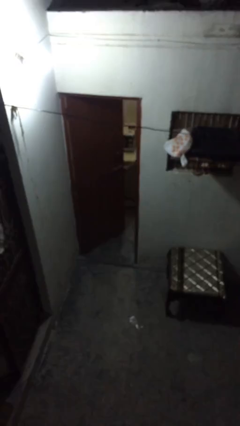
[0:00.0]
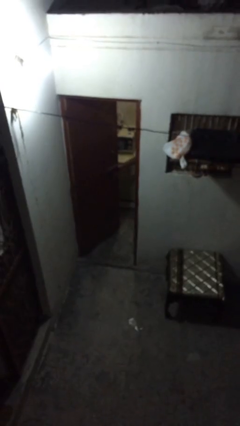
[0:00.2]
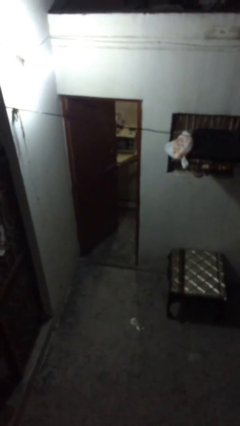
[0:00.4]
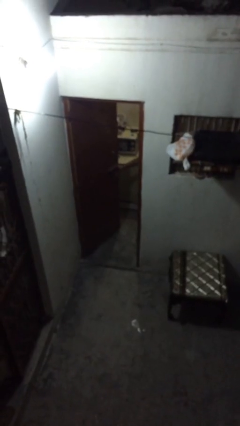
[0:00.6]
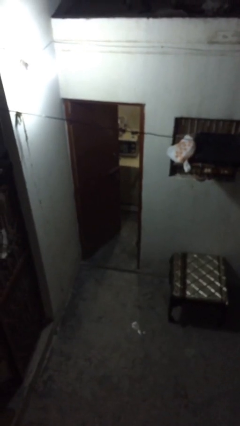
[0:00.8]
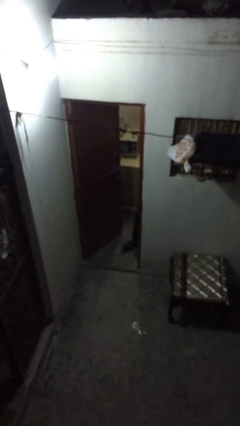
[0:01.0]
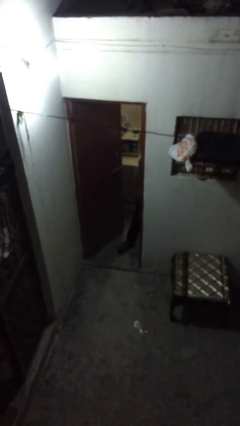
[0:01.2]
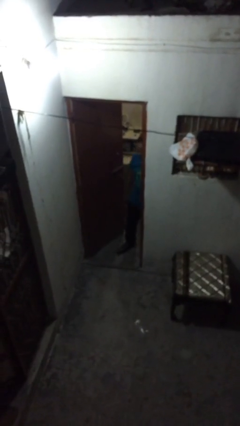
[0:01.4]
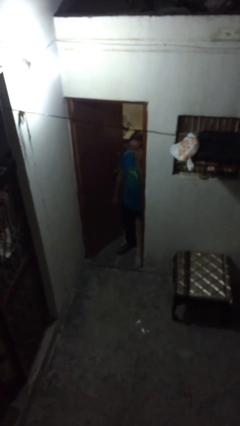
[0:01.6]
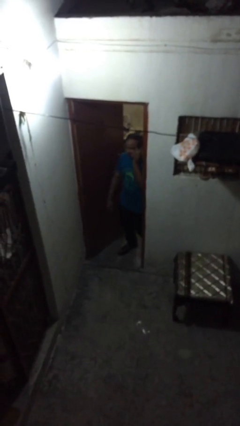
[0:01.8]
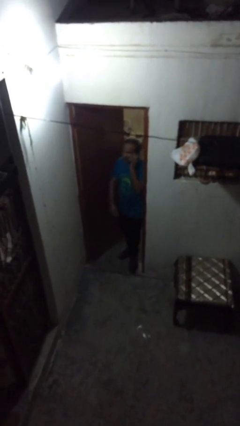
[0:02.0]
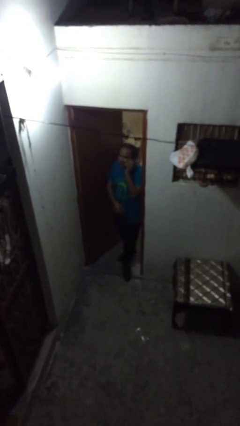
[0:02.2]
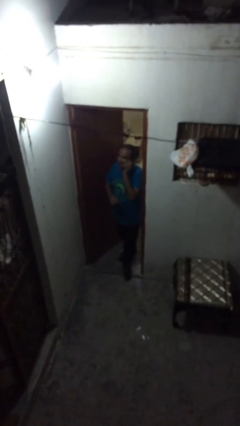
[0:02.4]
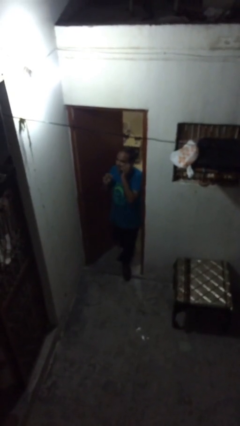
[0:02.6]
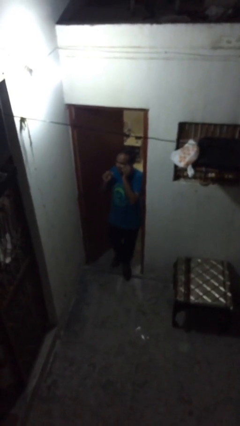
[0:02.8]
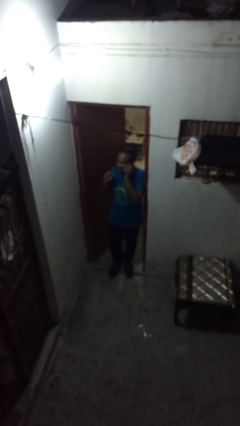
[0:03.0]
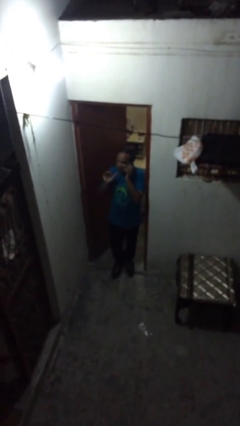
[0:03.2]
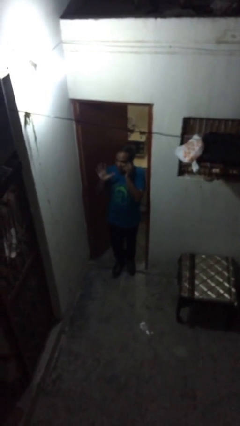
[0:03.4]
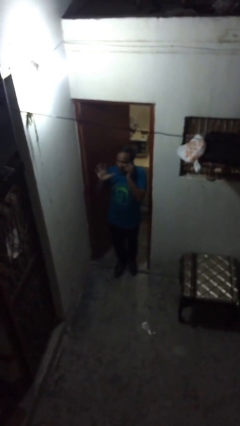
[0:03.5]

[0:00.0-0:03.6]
person enters scene through structure

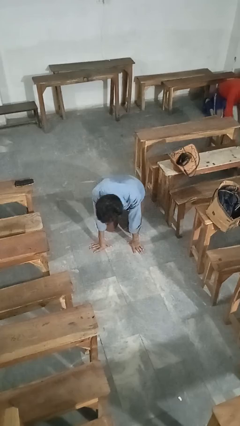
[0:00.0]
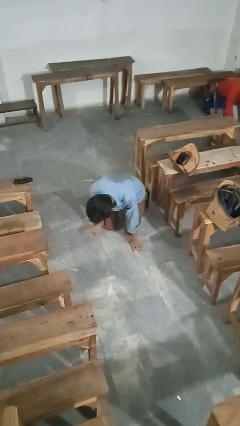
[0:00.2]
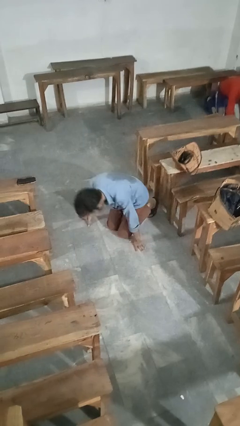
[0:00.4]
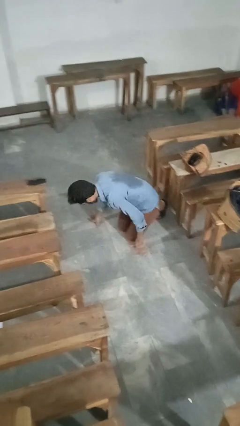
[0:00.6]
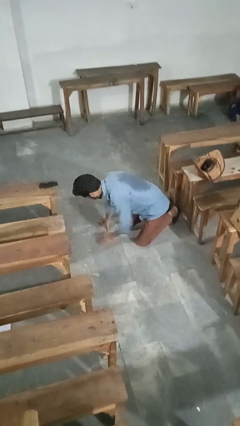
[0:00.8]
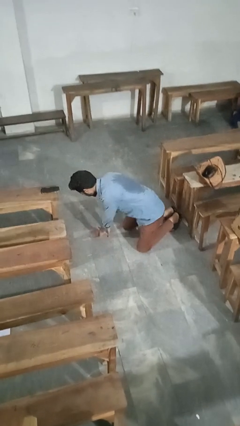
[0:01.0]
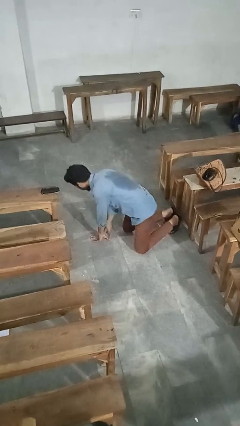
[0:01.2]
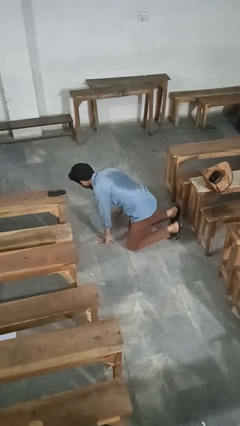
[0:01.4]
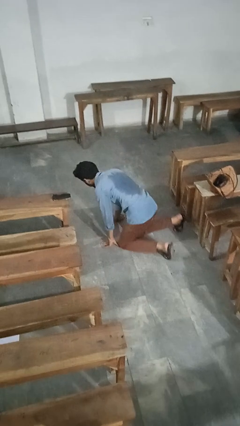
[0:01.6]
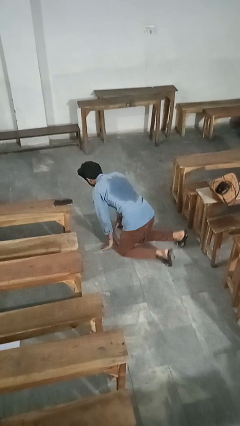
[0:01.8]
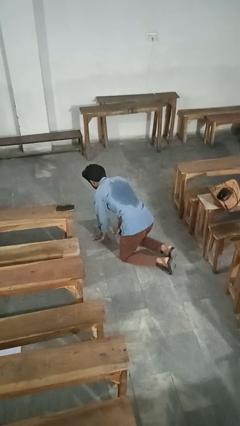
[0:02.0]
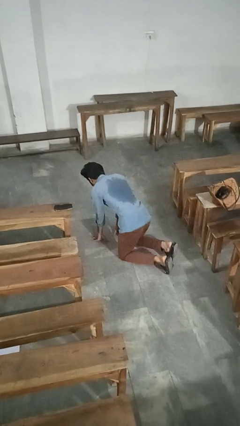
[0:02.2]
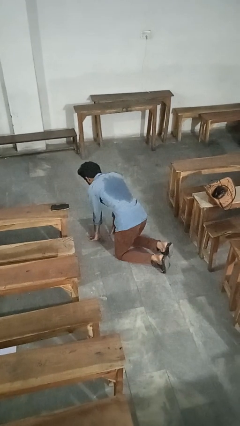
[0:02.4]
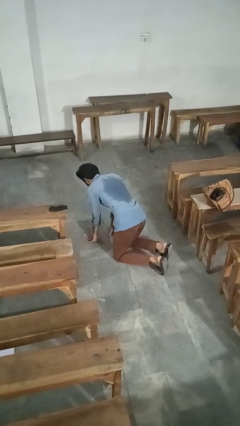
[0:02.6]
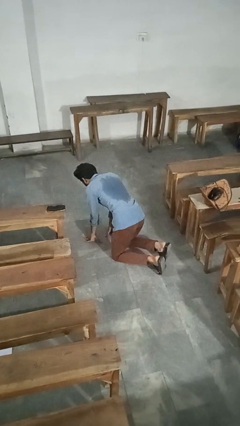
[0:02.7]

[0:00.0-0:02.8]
person crawls

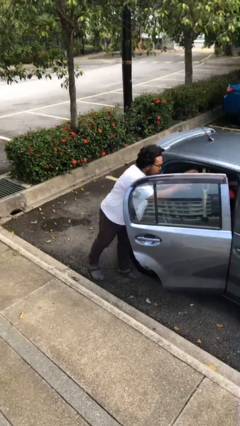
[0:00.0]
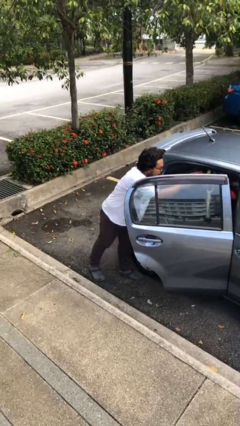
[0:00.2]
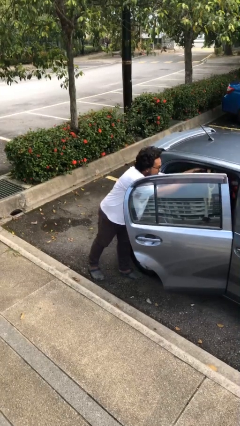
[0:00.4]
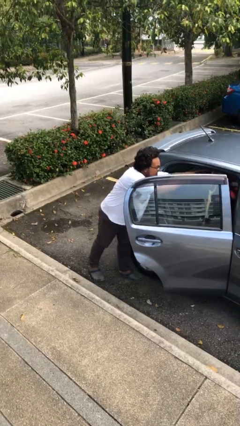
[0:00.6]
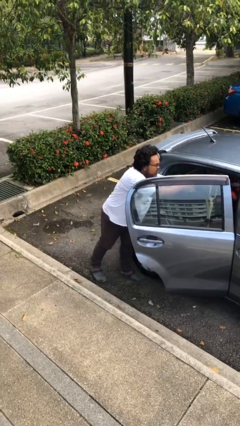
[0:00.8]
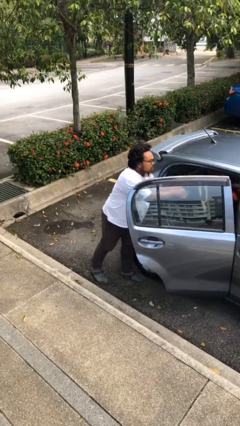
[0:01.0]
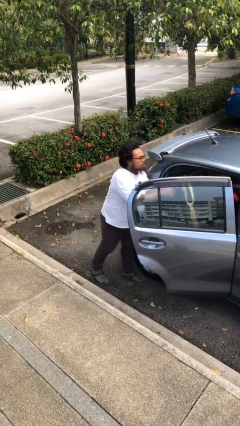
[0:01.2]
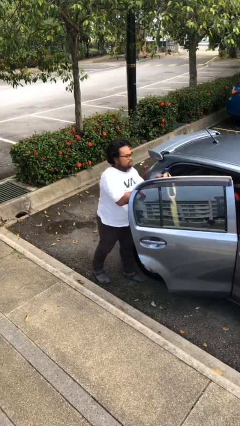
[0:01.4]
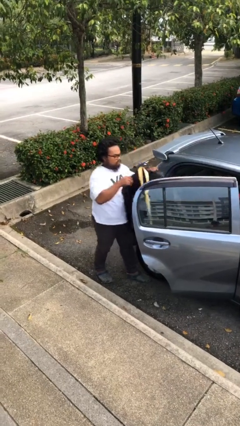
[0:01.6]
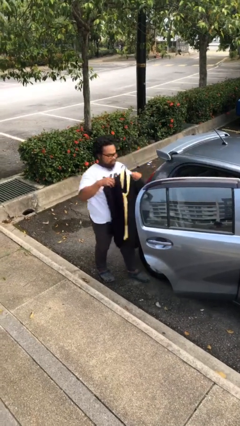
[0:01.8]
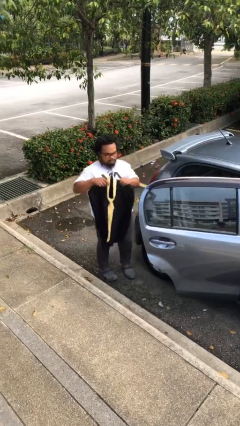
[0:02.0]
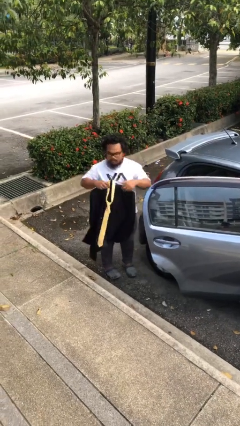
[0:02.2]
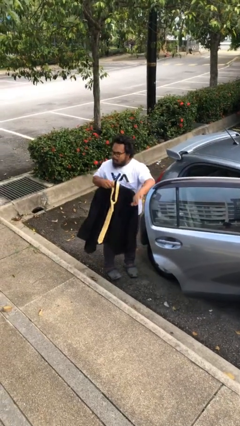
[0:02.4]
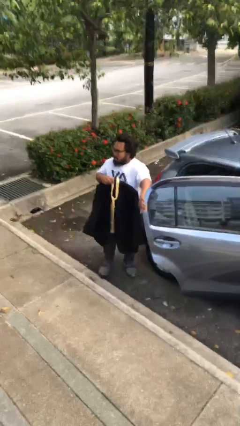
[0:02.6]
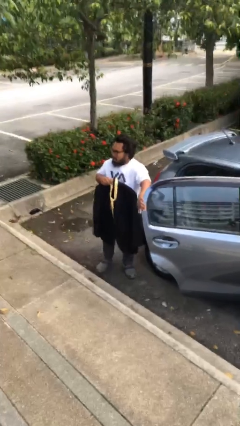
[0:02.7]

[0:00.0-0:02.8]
person unloads car

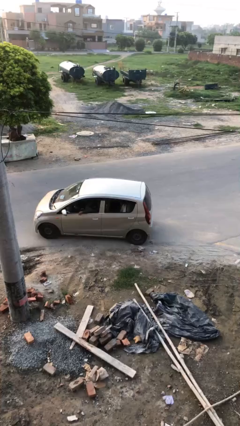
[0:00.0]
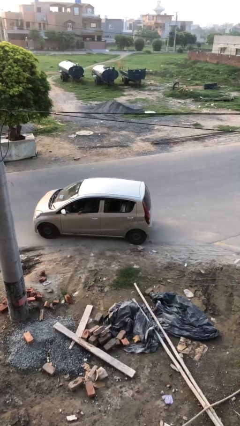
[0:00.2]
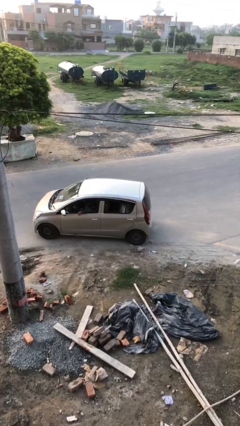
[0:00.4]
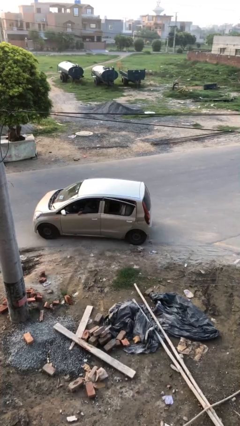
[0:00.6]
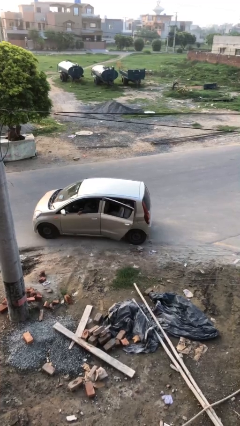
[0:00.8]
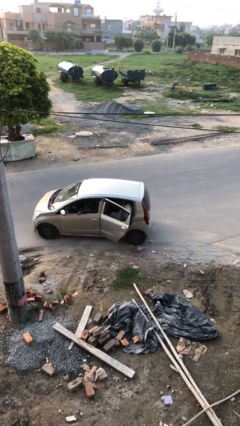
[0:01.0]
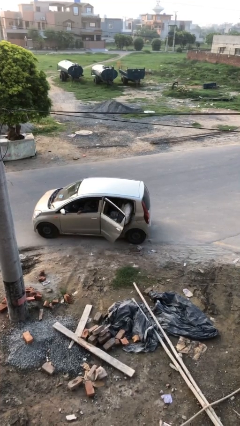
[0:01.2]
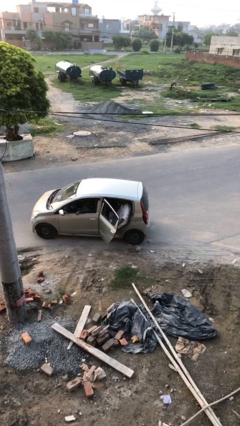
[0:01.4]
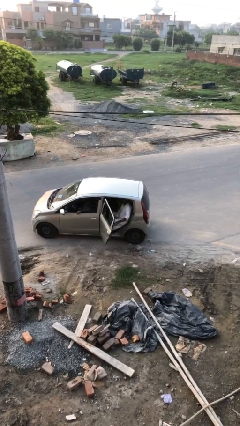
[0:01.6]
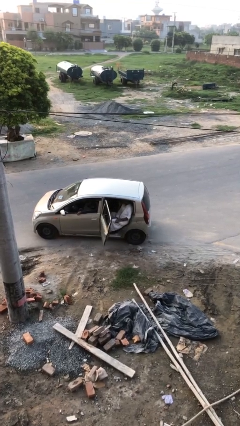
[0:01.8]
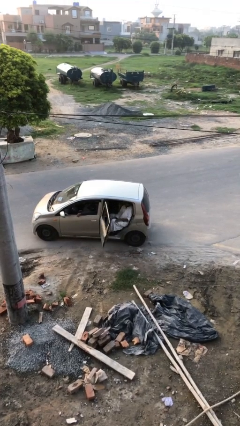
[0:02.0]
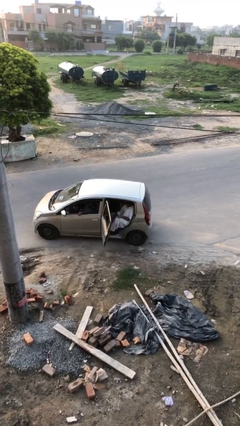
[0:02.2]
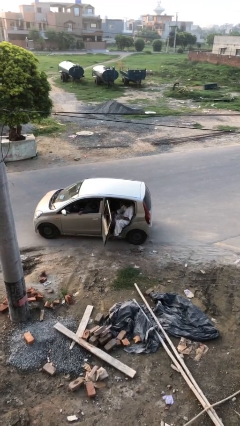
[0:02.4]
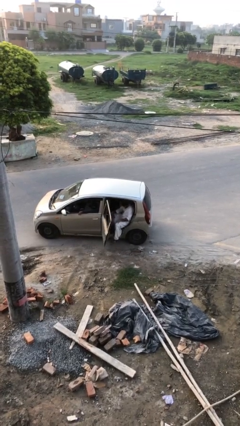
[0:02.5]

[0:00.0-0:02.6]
person opens car door

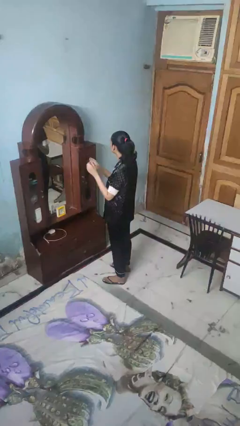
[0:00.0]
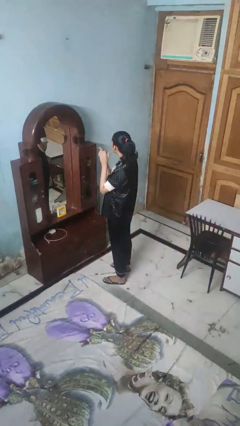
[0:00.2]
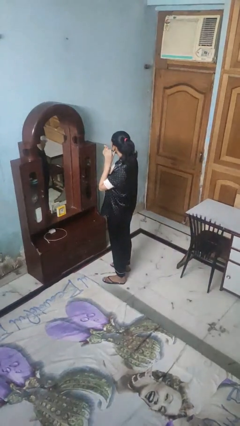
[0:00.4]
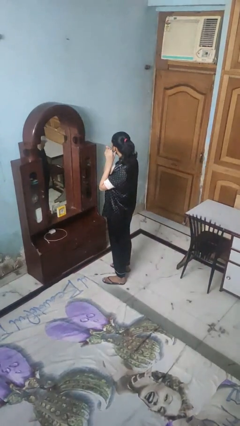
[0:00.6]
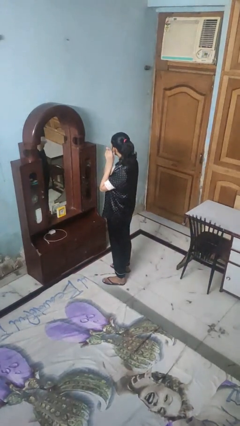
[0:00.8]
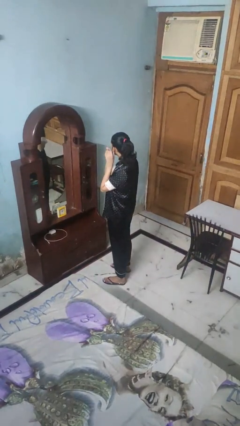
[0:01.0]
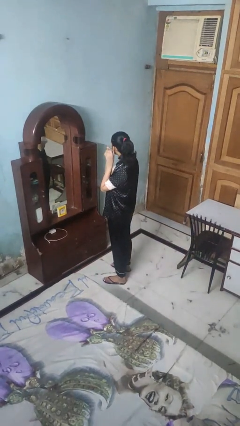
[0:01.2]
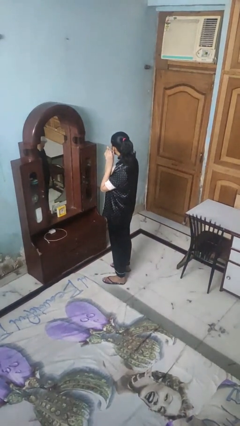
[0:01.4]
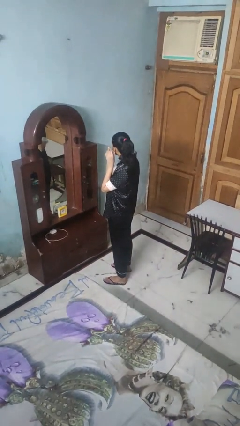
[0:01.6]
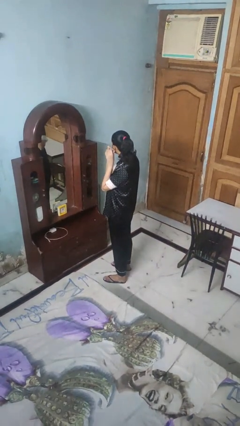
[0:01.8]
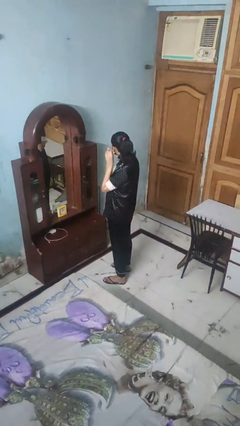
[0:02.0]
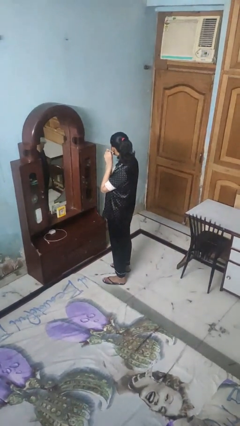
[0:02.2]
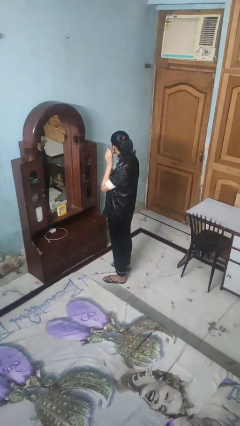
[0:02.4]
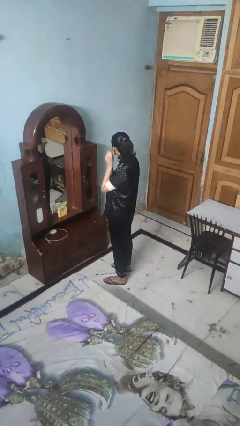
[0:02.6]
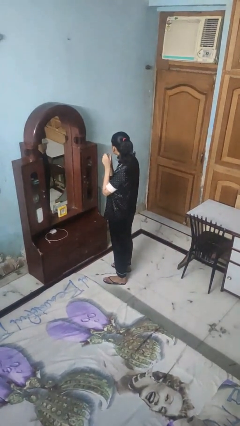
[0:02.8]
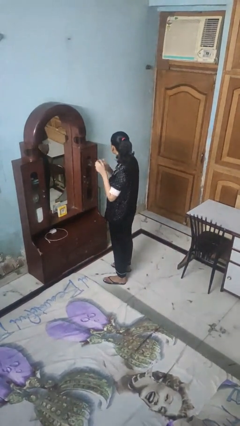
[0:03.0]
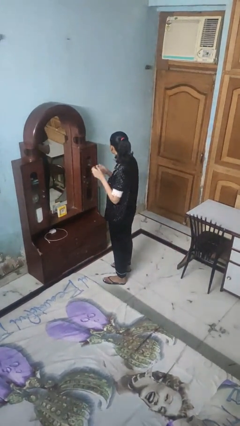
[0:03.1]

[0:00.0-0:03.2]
person puts on earrings

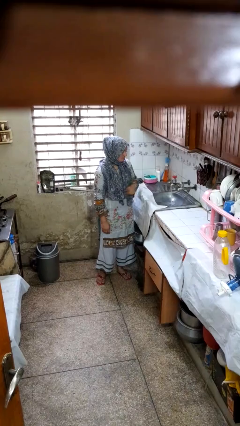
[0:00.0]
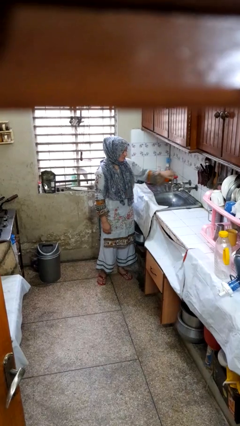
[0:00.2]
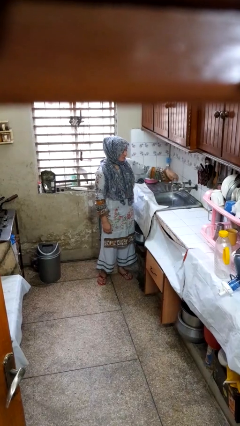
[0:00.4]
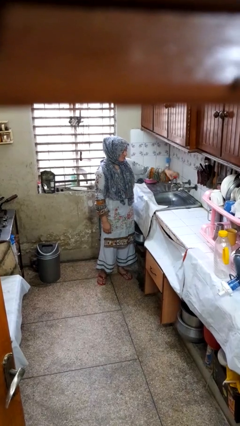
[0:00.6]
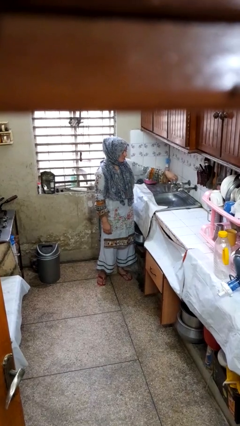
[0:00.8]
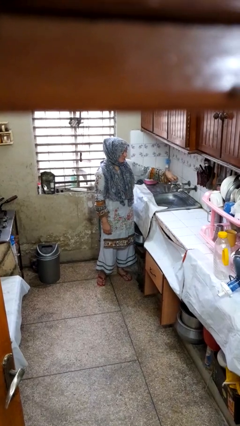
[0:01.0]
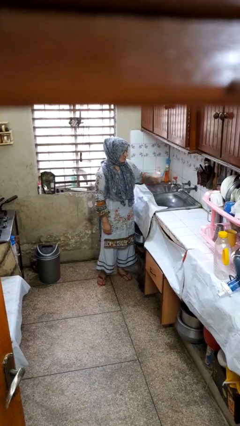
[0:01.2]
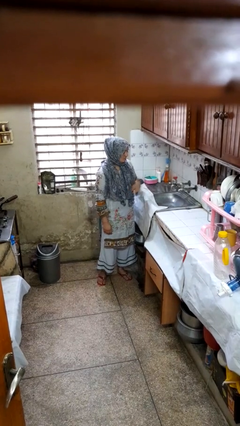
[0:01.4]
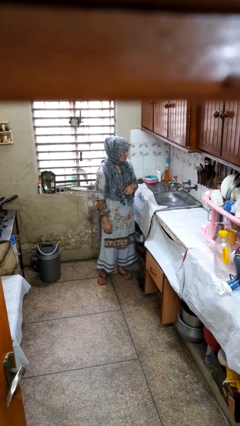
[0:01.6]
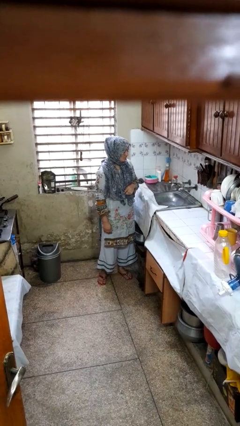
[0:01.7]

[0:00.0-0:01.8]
person turns off faucet

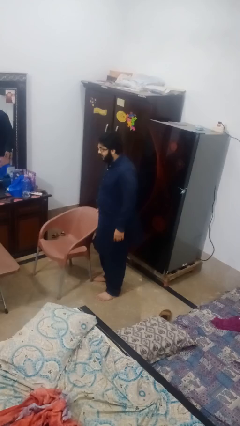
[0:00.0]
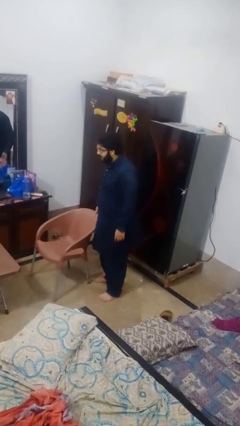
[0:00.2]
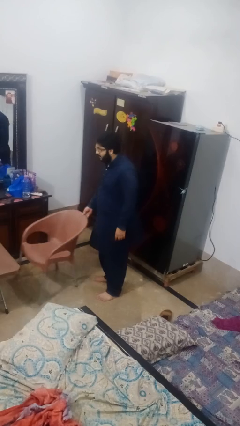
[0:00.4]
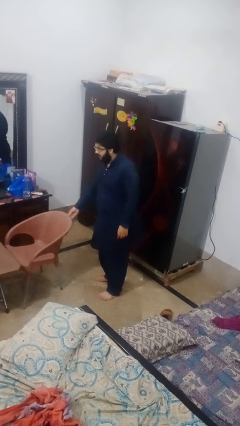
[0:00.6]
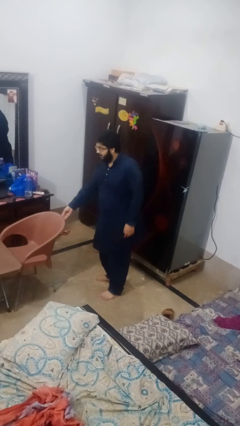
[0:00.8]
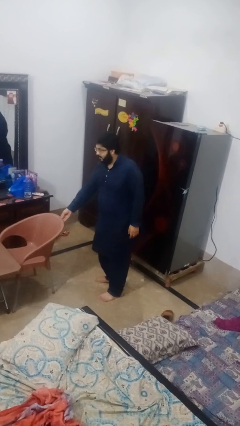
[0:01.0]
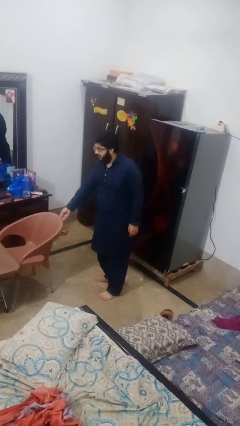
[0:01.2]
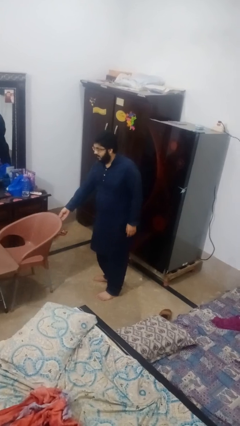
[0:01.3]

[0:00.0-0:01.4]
person pushes in chair
